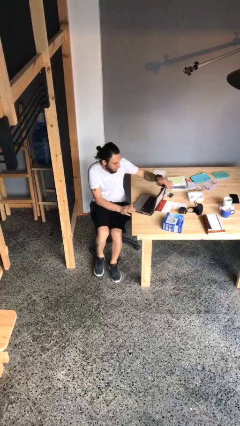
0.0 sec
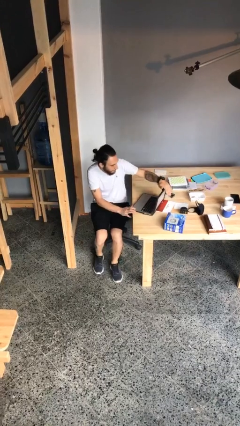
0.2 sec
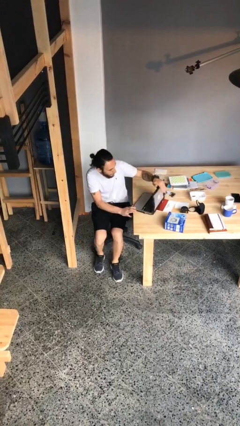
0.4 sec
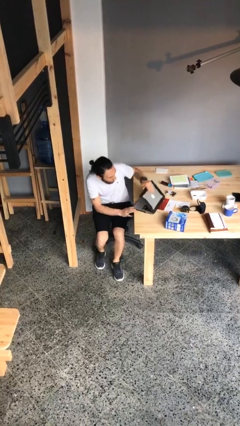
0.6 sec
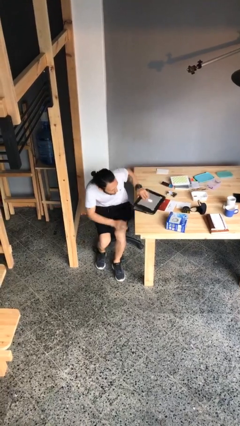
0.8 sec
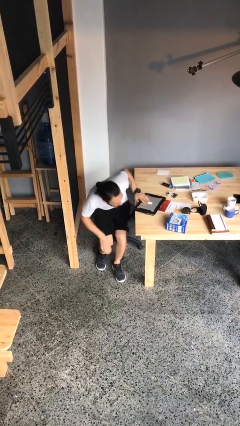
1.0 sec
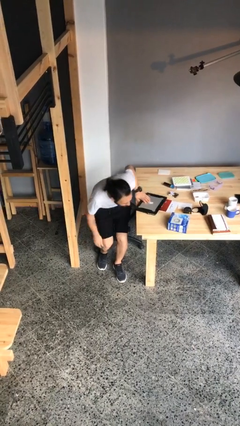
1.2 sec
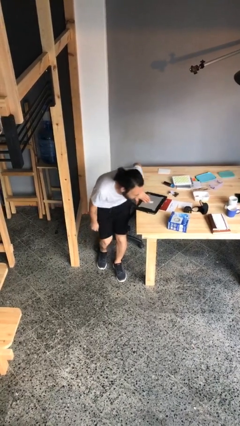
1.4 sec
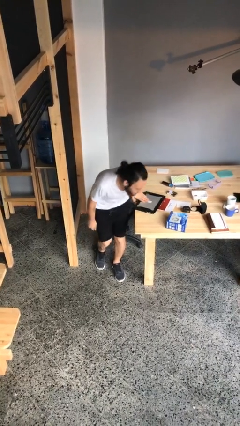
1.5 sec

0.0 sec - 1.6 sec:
person stands up

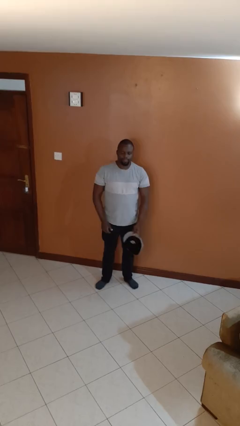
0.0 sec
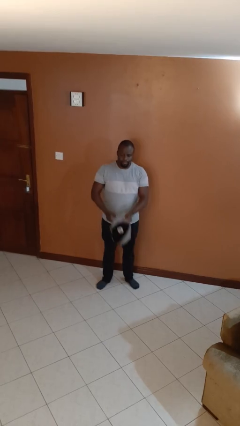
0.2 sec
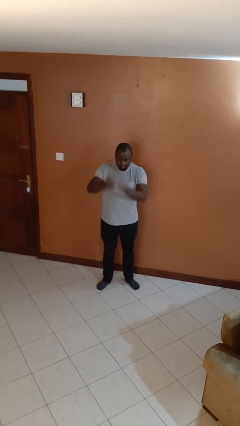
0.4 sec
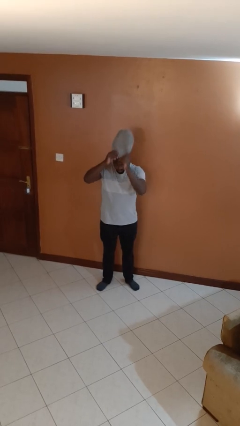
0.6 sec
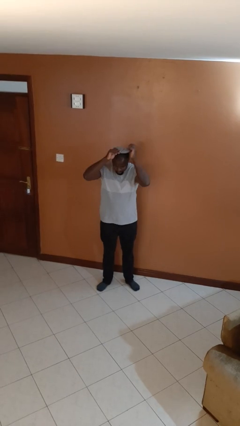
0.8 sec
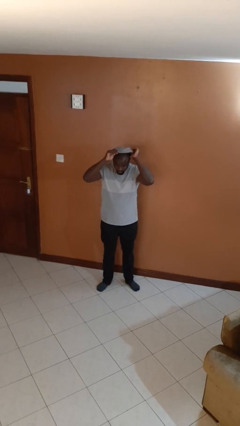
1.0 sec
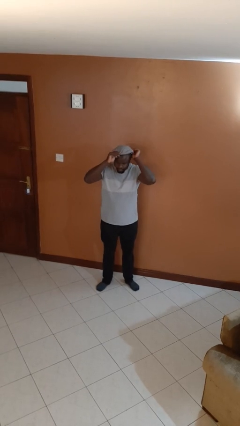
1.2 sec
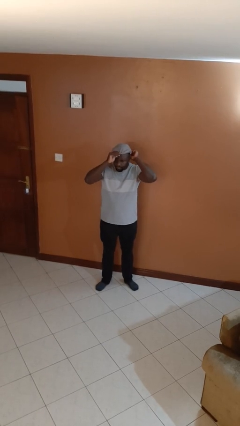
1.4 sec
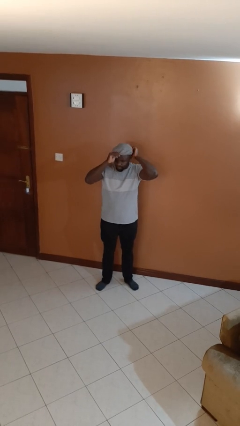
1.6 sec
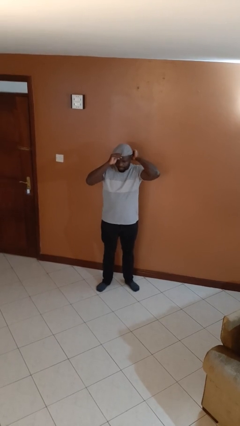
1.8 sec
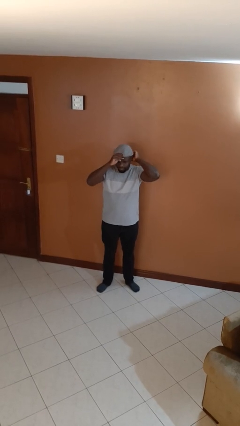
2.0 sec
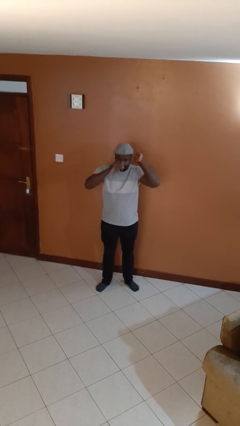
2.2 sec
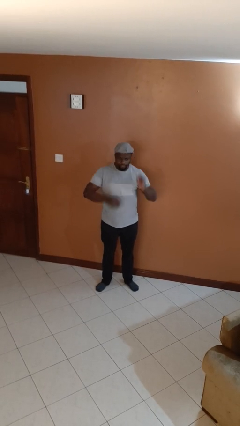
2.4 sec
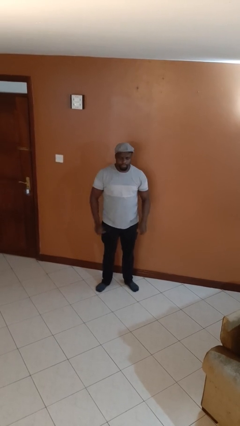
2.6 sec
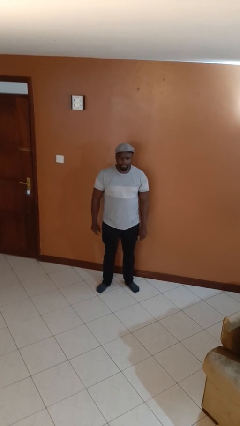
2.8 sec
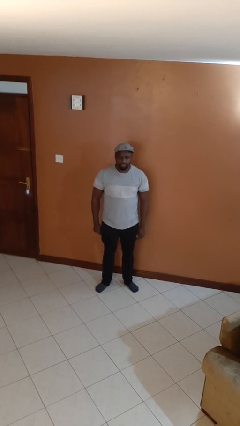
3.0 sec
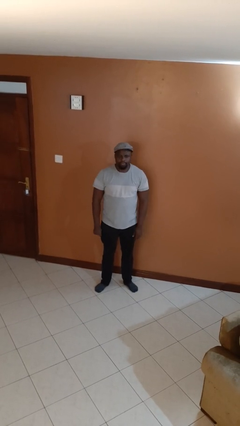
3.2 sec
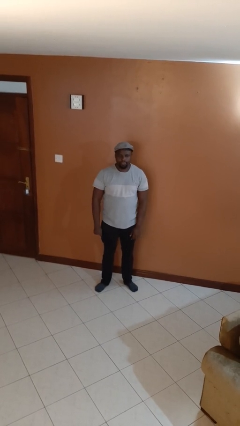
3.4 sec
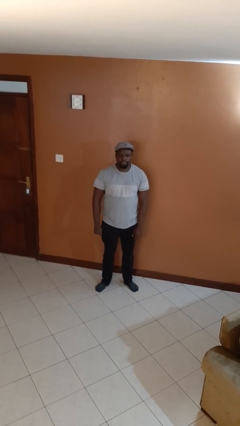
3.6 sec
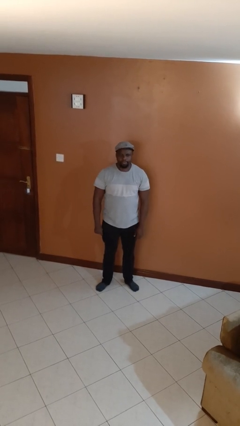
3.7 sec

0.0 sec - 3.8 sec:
person puts on hat

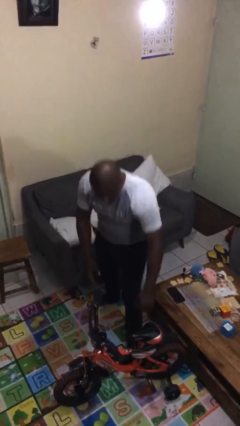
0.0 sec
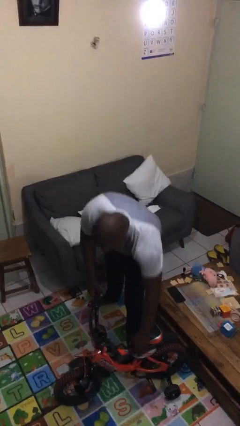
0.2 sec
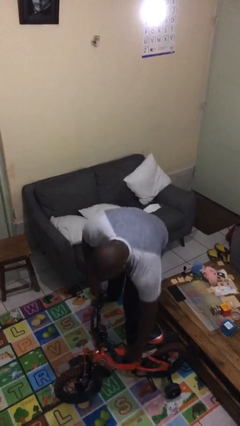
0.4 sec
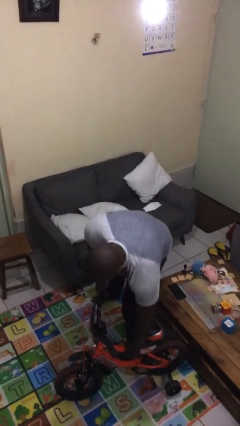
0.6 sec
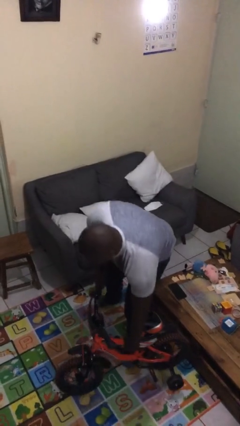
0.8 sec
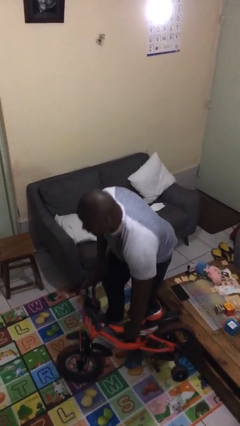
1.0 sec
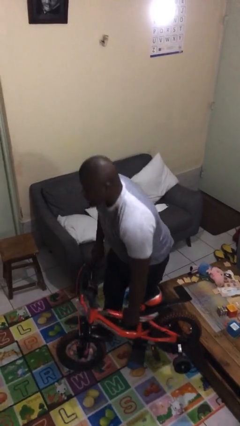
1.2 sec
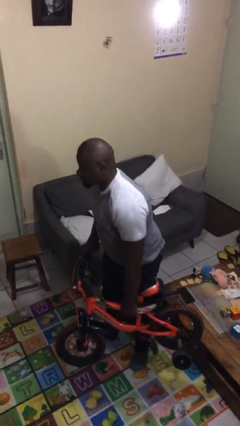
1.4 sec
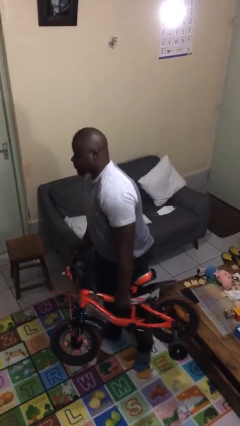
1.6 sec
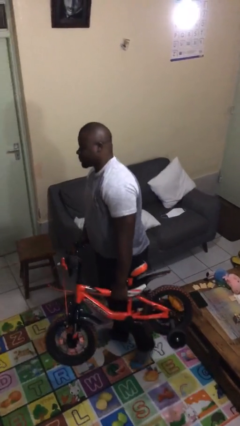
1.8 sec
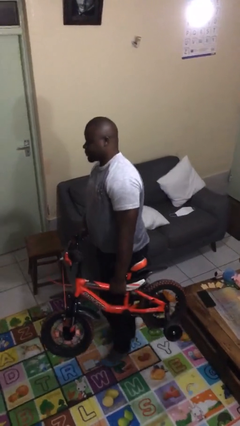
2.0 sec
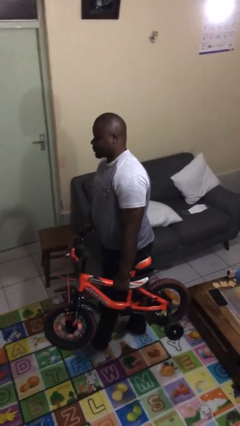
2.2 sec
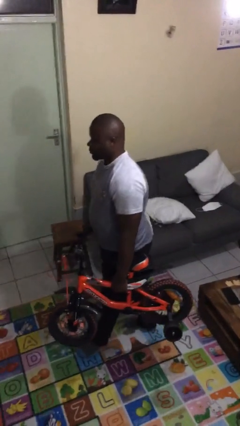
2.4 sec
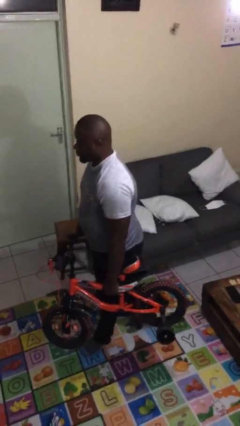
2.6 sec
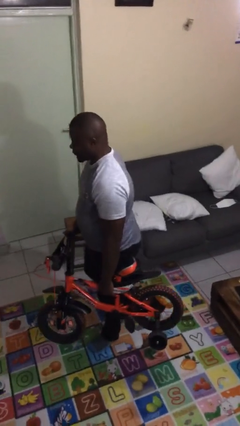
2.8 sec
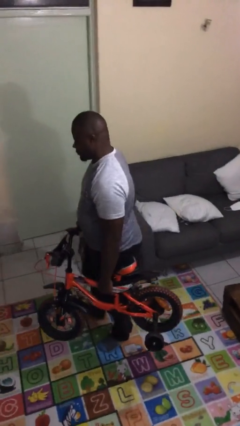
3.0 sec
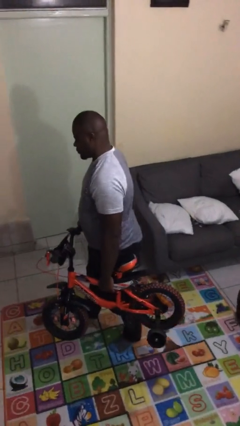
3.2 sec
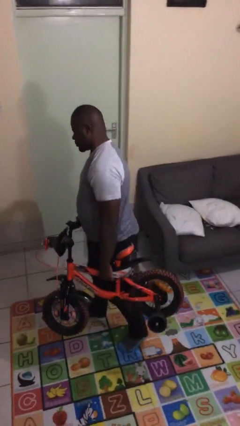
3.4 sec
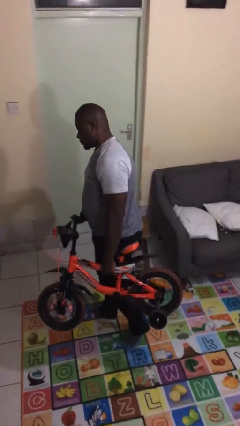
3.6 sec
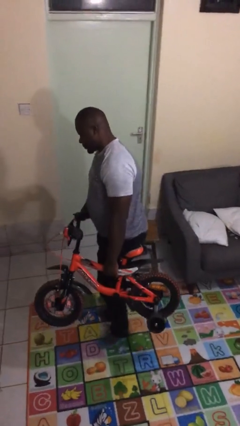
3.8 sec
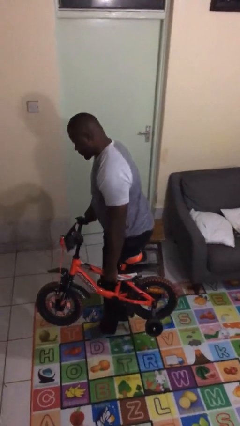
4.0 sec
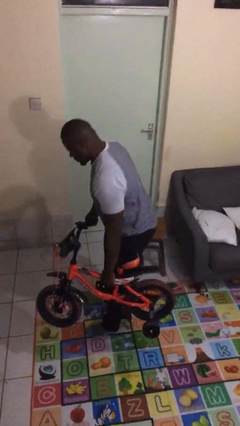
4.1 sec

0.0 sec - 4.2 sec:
person carries bicycle

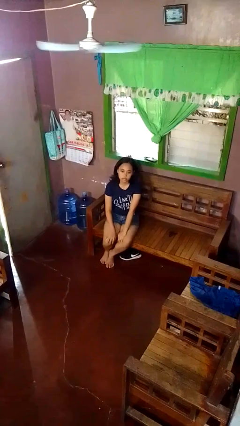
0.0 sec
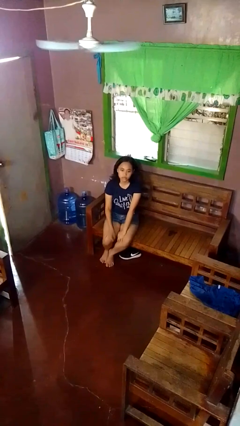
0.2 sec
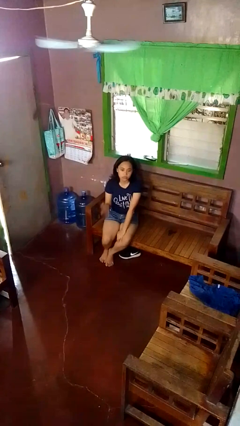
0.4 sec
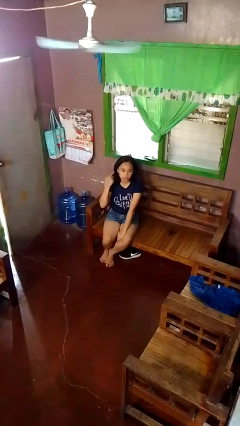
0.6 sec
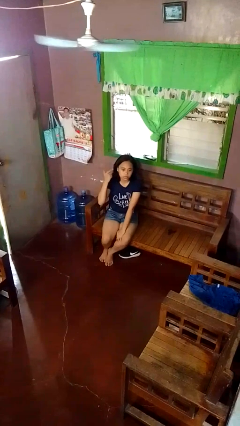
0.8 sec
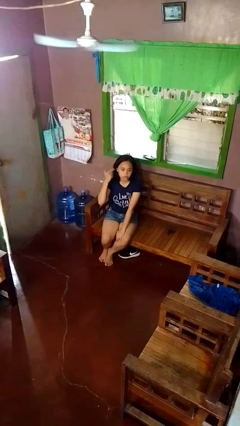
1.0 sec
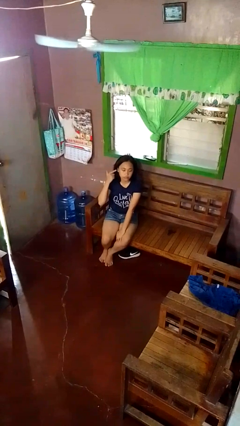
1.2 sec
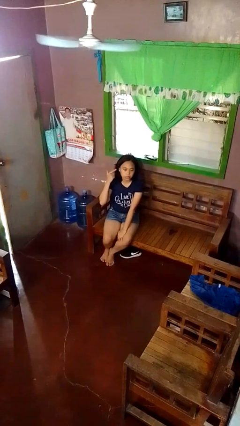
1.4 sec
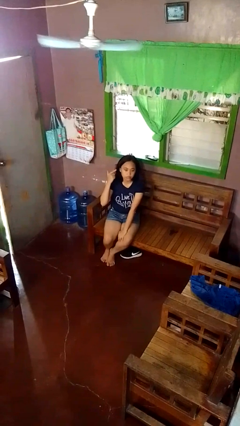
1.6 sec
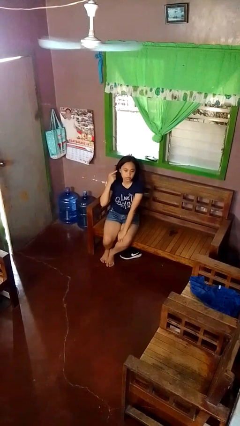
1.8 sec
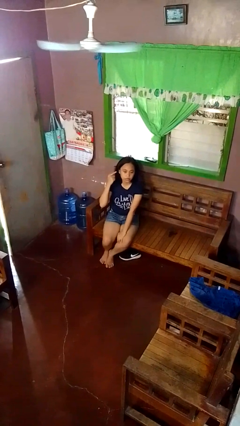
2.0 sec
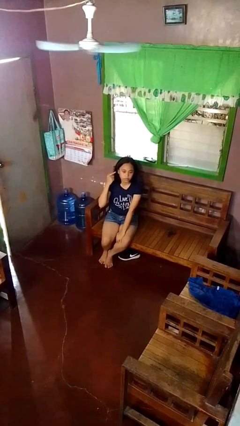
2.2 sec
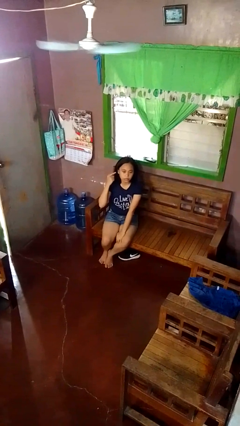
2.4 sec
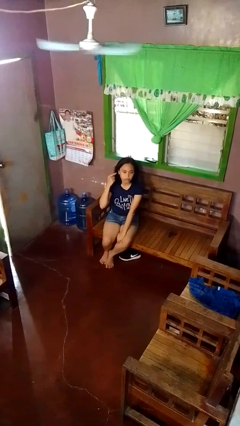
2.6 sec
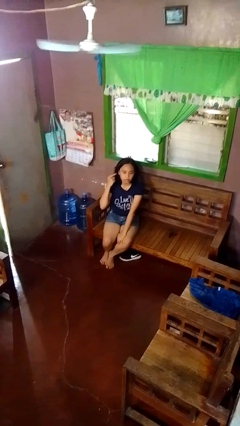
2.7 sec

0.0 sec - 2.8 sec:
person gestures listen closely

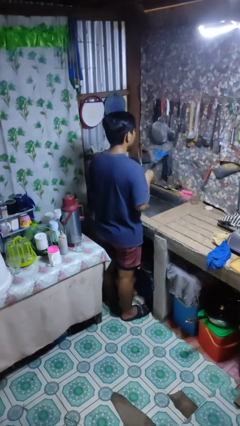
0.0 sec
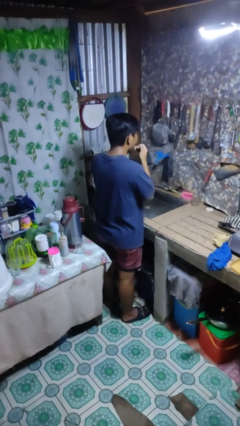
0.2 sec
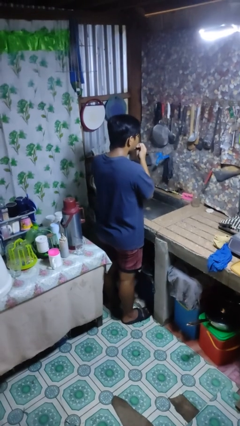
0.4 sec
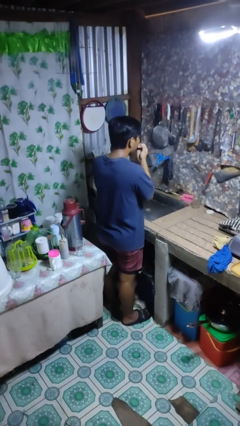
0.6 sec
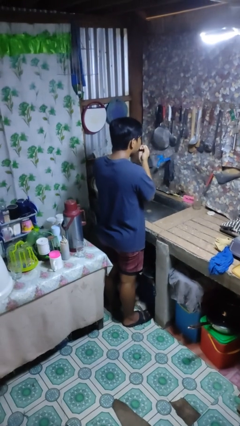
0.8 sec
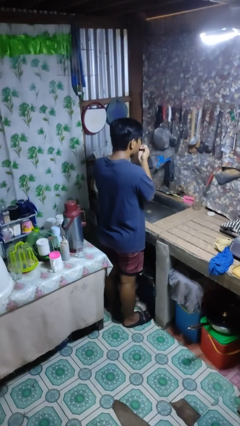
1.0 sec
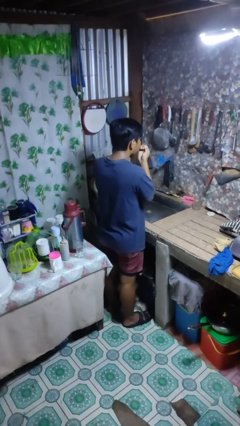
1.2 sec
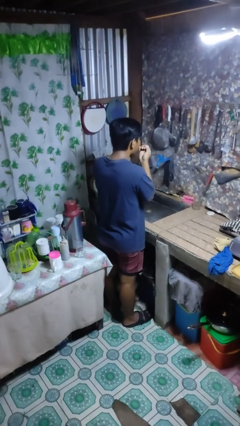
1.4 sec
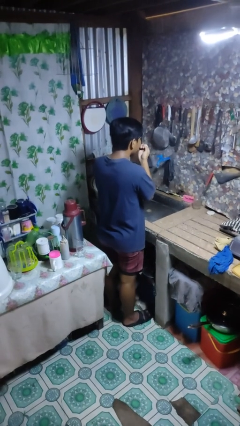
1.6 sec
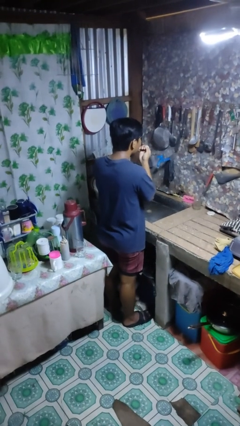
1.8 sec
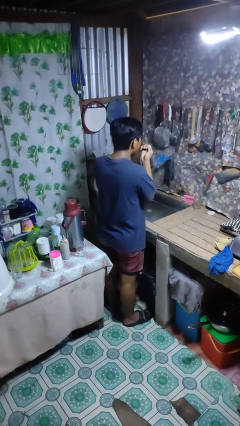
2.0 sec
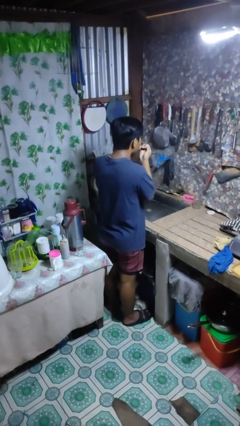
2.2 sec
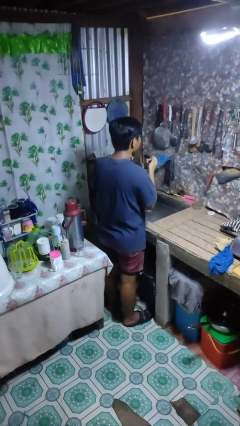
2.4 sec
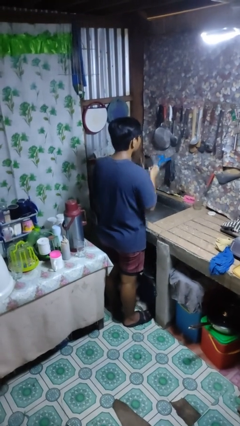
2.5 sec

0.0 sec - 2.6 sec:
person flosses

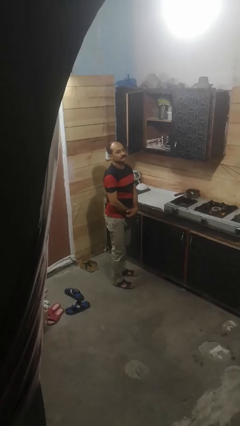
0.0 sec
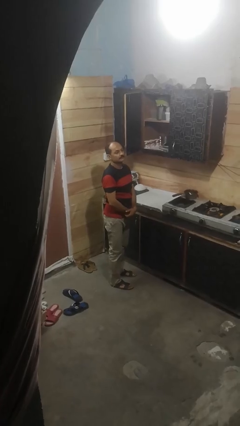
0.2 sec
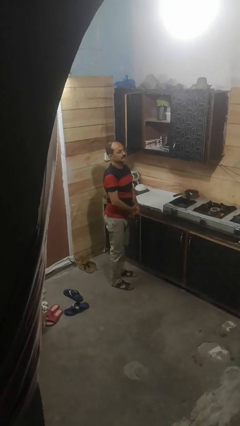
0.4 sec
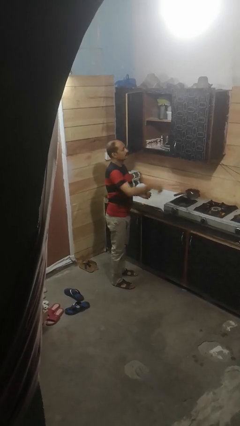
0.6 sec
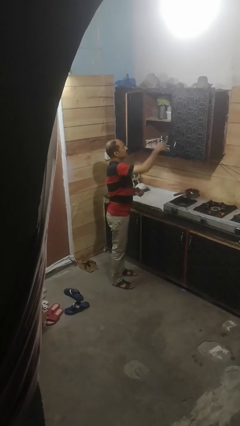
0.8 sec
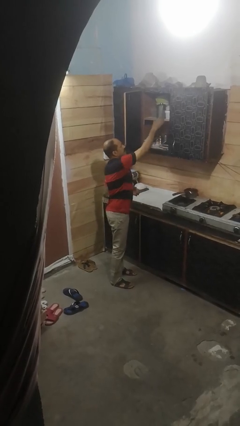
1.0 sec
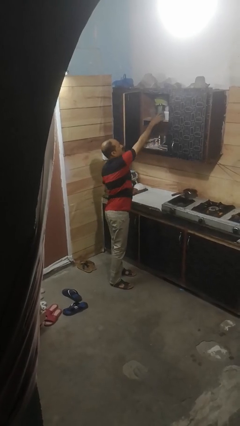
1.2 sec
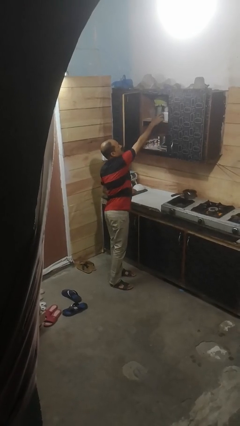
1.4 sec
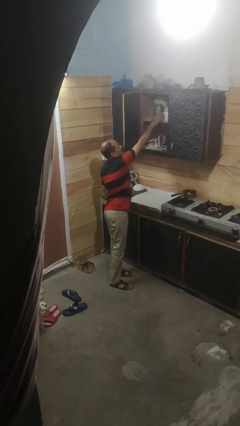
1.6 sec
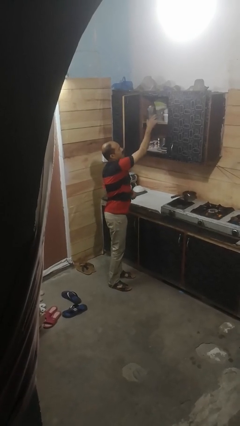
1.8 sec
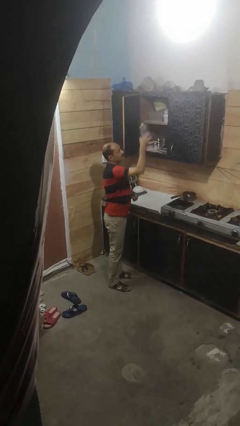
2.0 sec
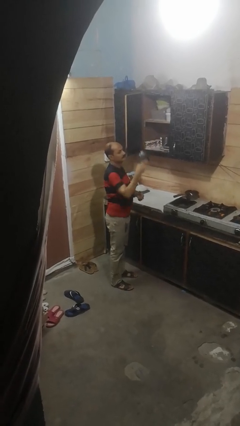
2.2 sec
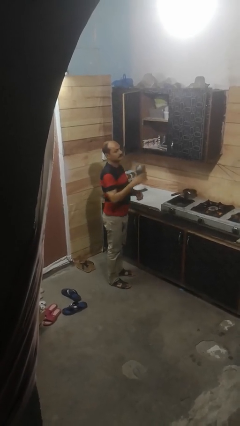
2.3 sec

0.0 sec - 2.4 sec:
person picks up object from cabinet
